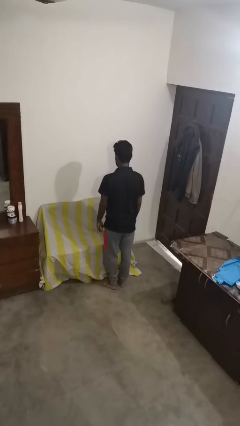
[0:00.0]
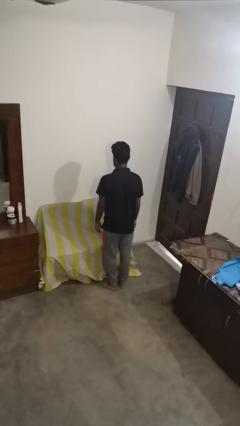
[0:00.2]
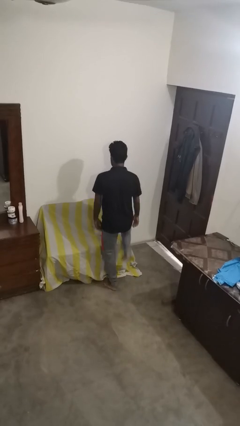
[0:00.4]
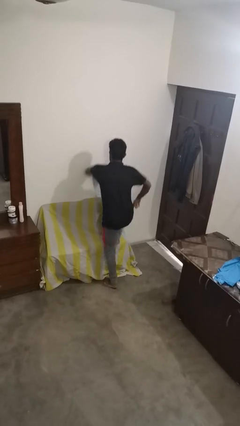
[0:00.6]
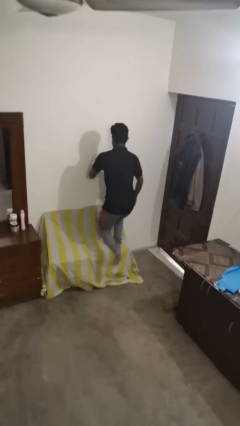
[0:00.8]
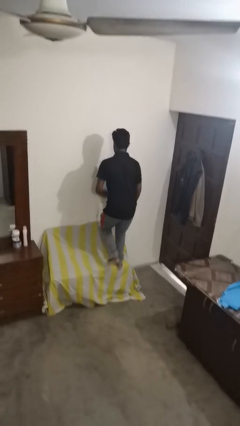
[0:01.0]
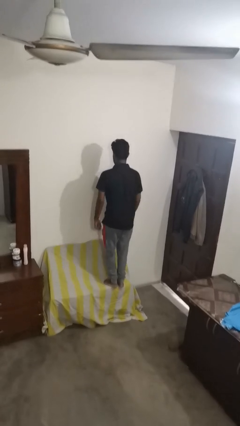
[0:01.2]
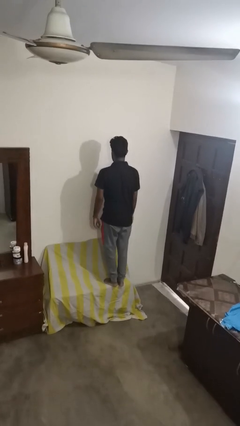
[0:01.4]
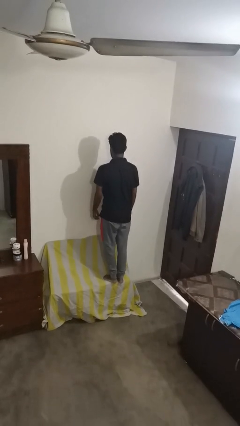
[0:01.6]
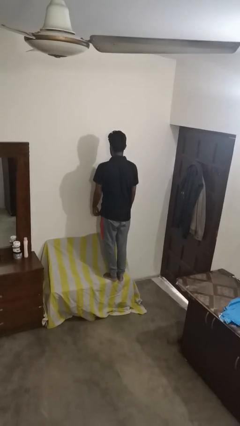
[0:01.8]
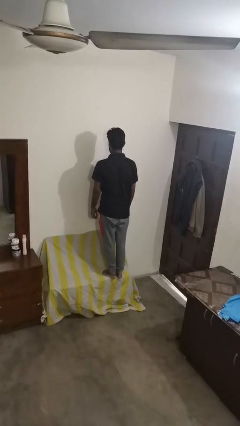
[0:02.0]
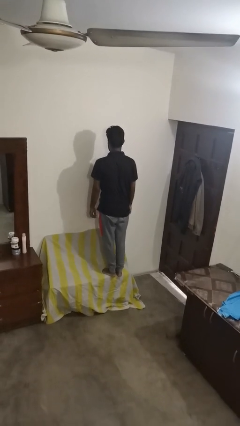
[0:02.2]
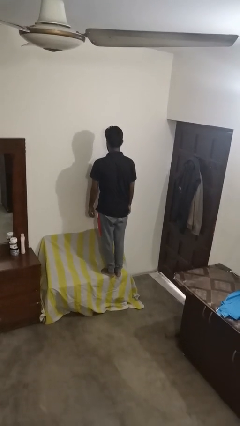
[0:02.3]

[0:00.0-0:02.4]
person jumps on couch

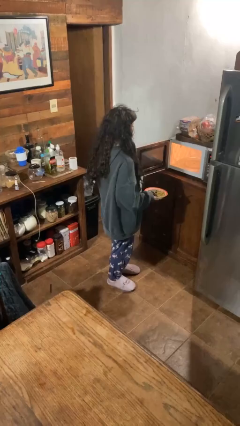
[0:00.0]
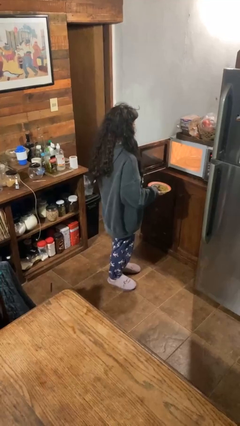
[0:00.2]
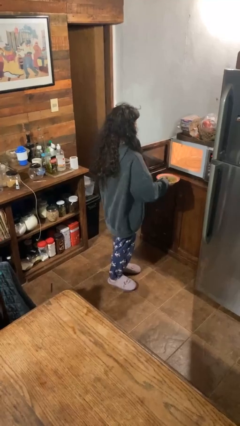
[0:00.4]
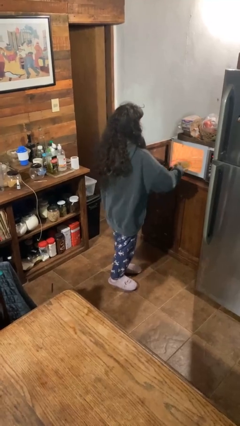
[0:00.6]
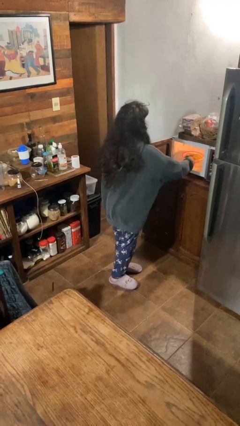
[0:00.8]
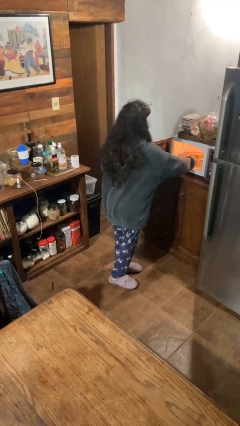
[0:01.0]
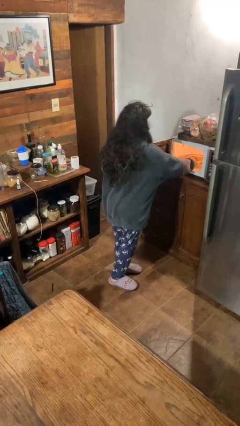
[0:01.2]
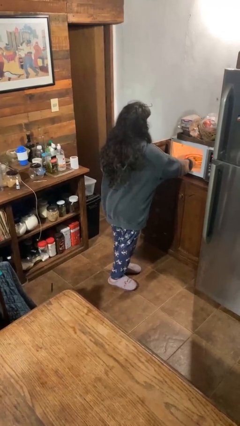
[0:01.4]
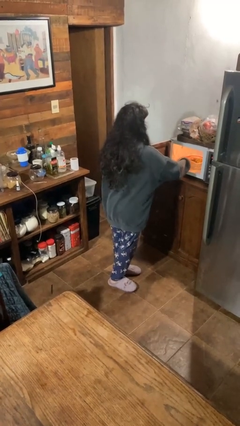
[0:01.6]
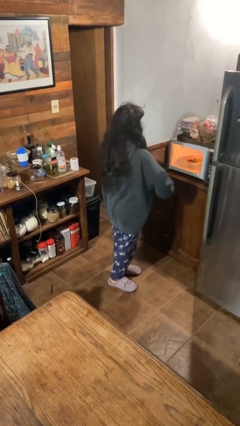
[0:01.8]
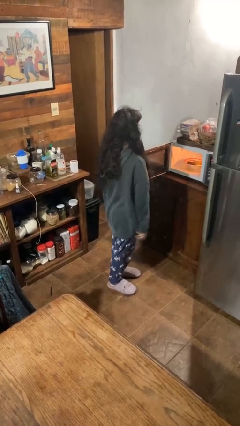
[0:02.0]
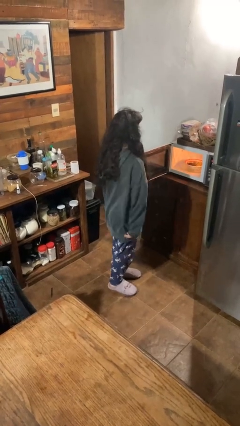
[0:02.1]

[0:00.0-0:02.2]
person puts object into microwave

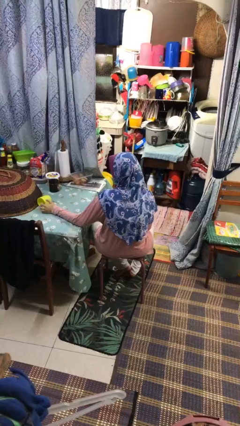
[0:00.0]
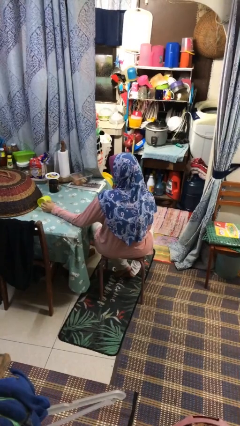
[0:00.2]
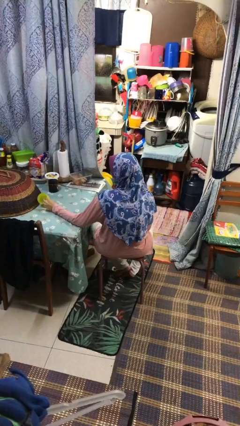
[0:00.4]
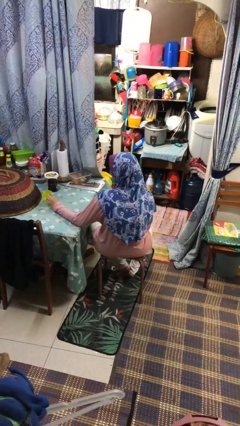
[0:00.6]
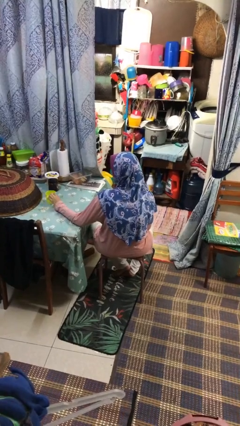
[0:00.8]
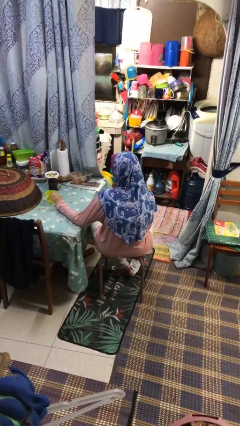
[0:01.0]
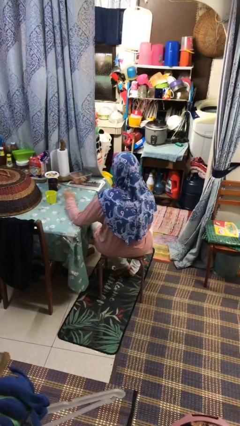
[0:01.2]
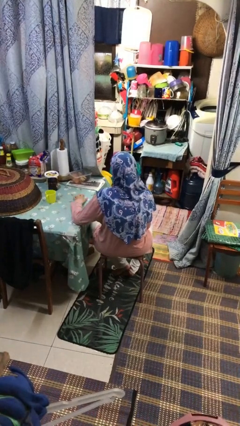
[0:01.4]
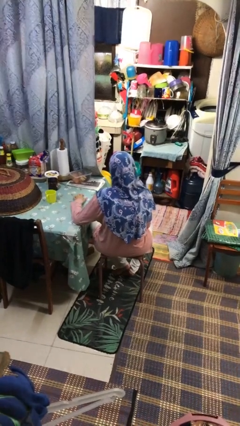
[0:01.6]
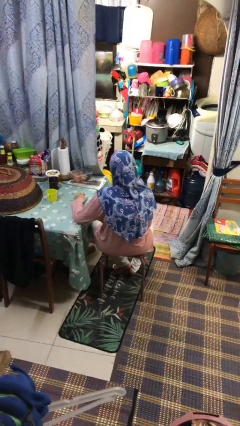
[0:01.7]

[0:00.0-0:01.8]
person sets upright glass

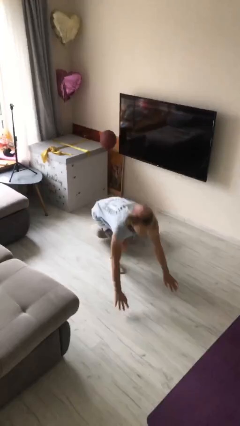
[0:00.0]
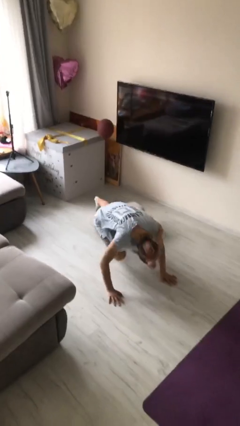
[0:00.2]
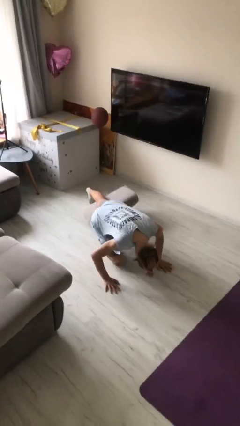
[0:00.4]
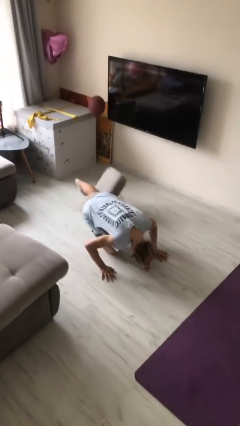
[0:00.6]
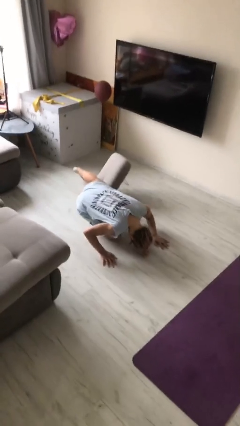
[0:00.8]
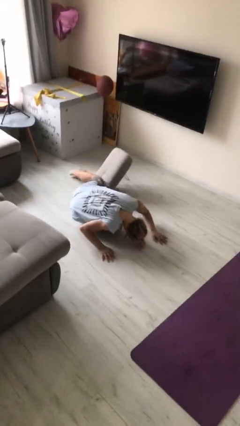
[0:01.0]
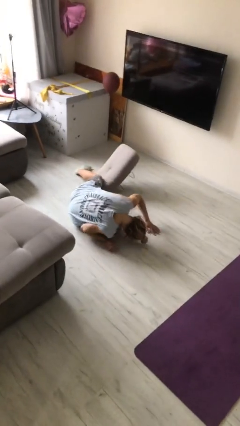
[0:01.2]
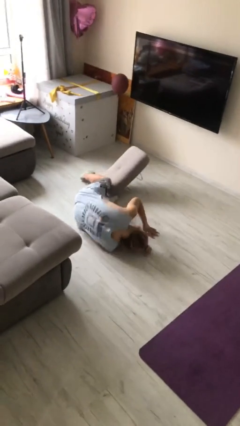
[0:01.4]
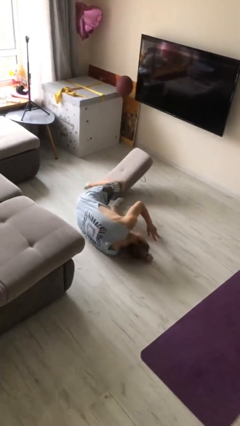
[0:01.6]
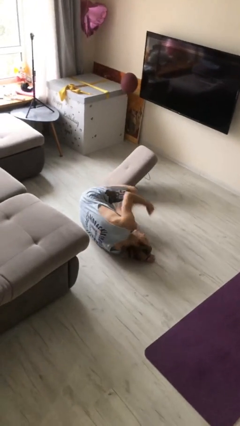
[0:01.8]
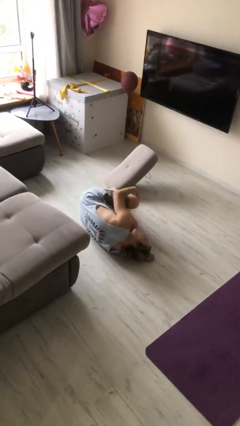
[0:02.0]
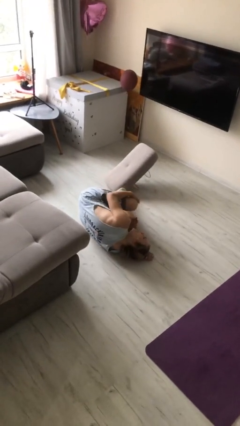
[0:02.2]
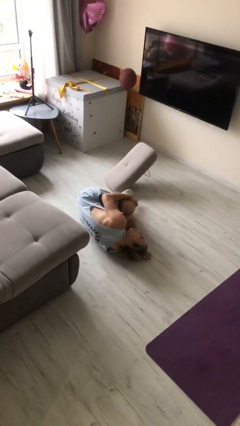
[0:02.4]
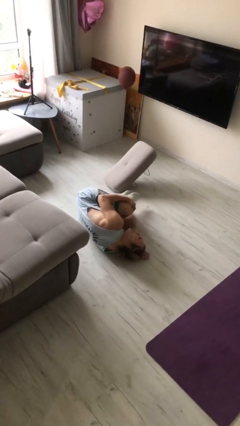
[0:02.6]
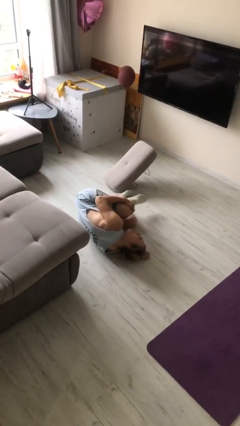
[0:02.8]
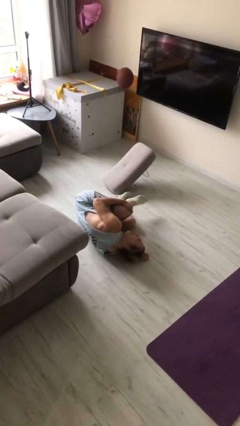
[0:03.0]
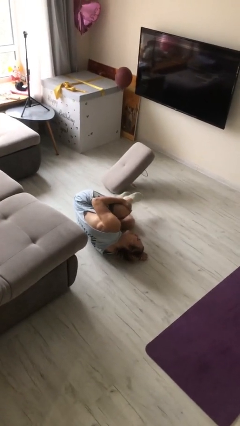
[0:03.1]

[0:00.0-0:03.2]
person lies down on floor

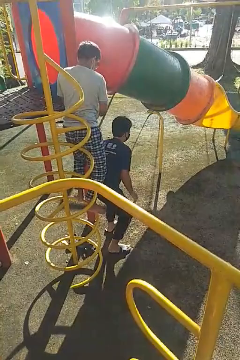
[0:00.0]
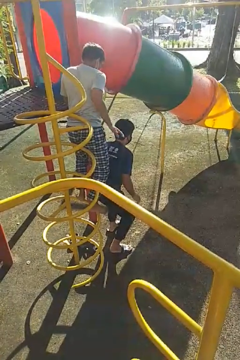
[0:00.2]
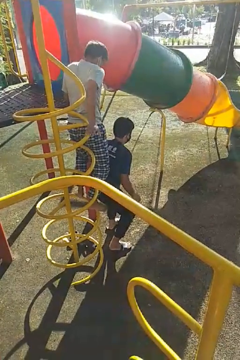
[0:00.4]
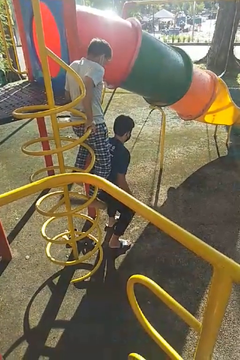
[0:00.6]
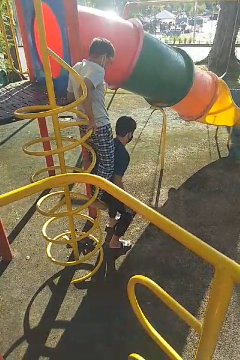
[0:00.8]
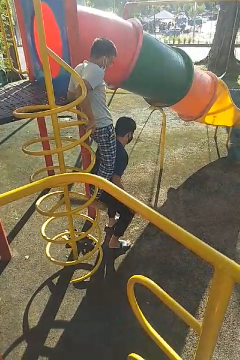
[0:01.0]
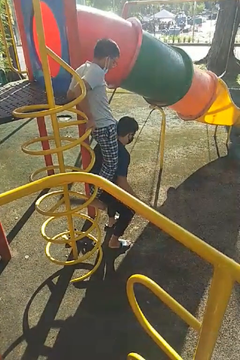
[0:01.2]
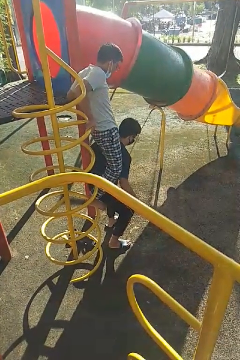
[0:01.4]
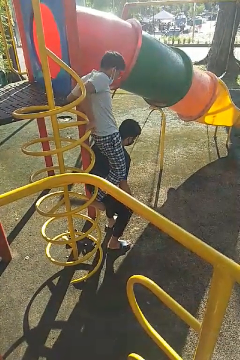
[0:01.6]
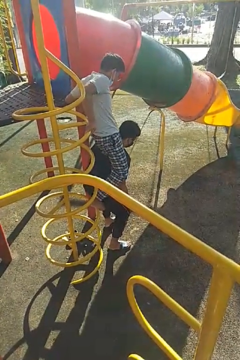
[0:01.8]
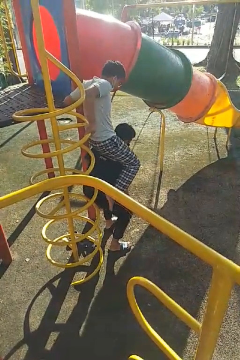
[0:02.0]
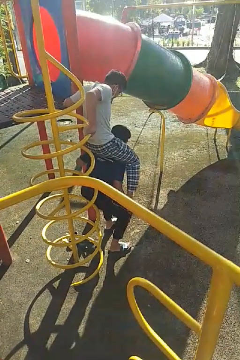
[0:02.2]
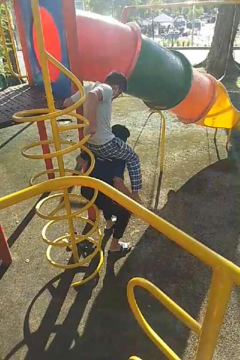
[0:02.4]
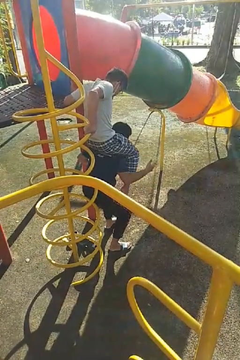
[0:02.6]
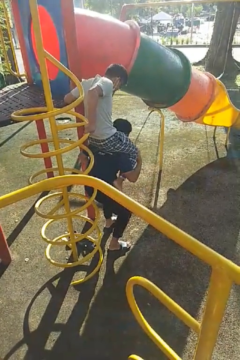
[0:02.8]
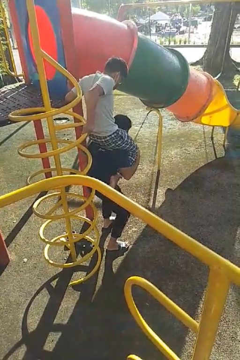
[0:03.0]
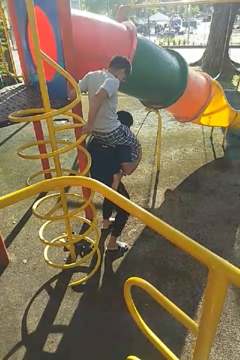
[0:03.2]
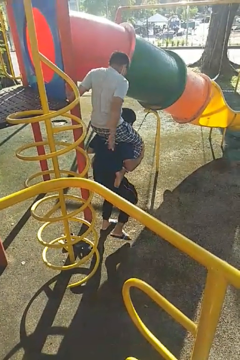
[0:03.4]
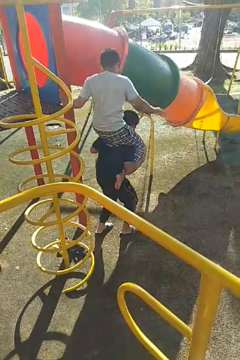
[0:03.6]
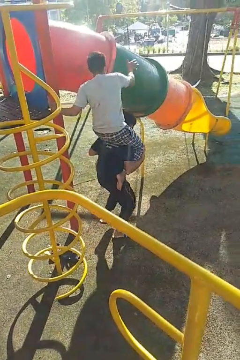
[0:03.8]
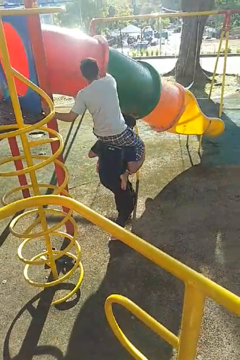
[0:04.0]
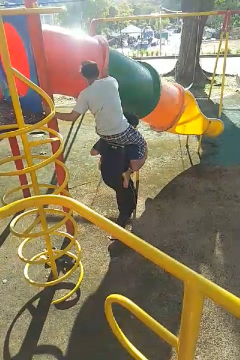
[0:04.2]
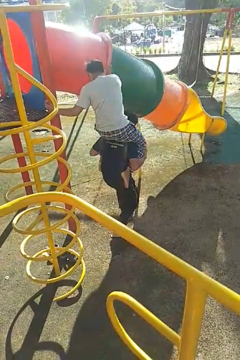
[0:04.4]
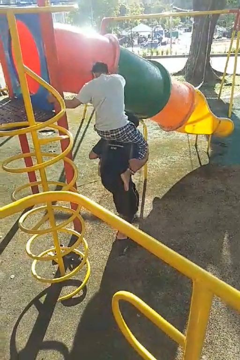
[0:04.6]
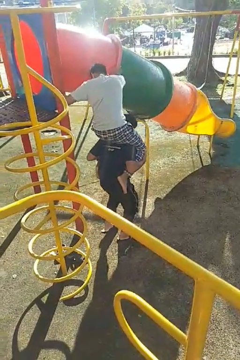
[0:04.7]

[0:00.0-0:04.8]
person carries person on shoulders

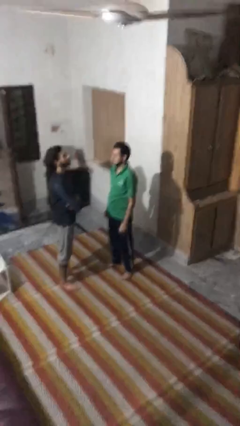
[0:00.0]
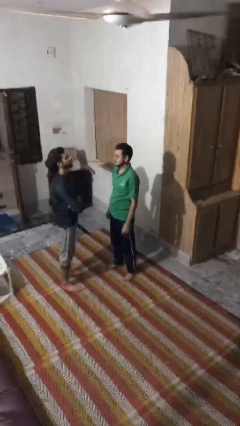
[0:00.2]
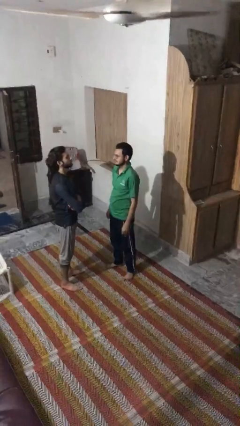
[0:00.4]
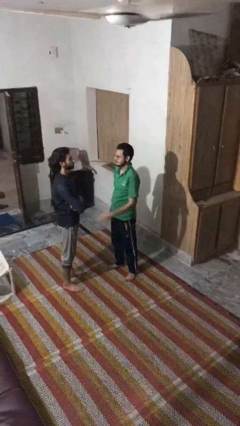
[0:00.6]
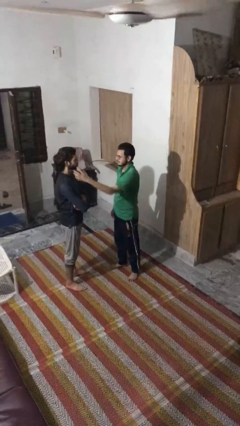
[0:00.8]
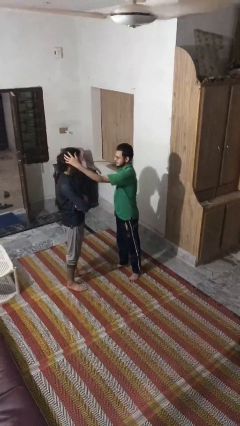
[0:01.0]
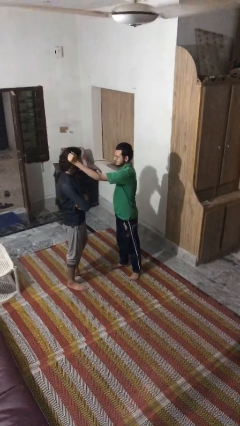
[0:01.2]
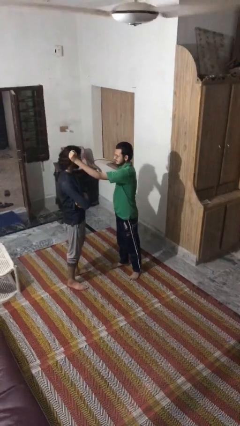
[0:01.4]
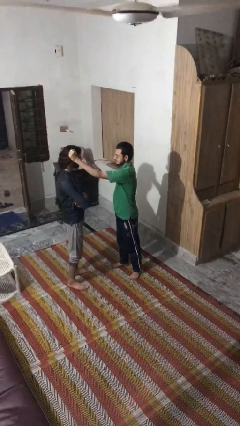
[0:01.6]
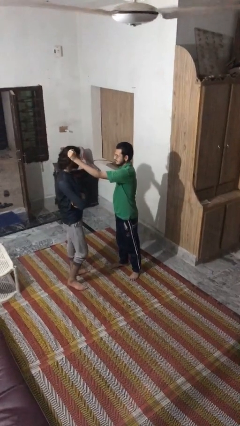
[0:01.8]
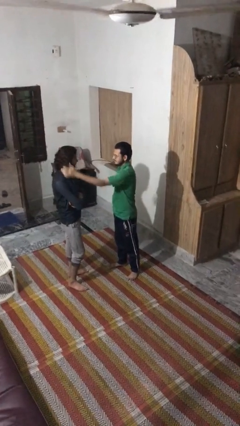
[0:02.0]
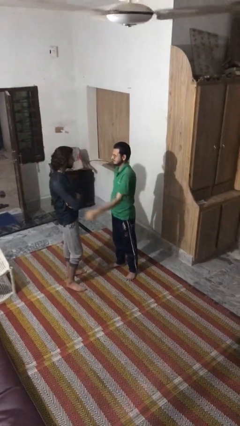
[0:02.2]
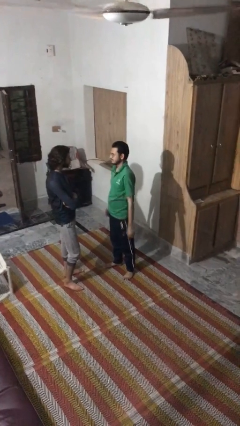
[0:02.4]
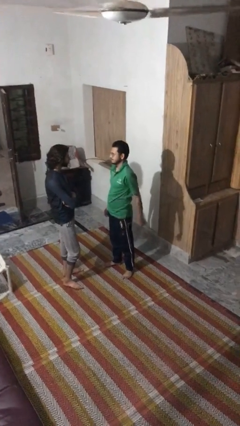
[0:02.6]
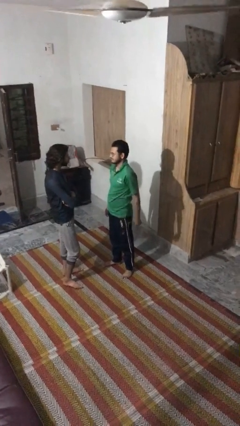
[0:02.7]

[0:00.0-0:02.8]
person grabs person by hair

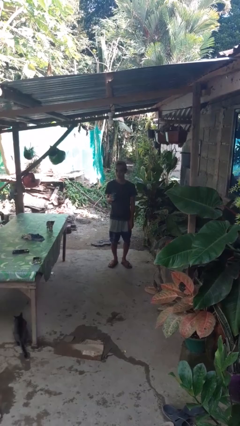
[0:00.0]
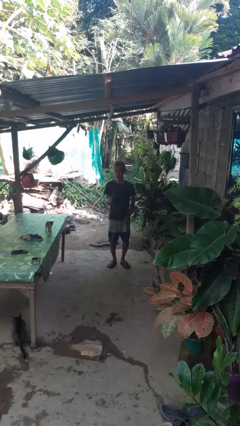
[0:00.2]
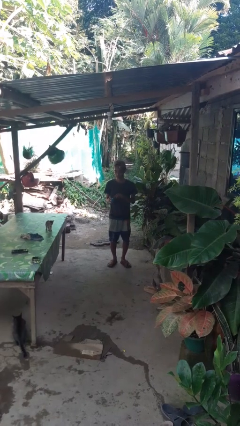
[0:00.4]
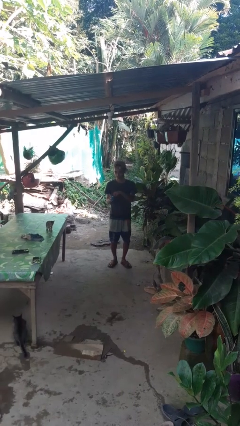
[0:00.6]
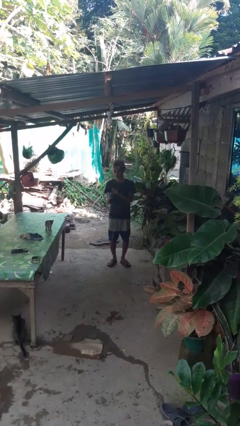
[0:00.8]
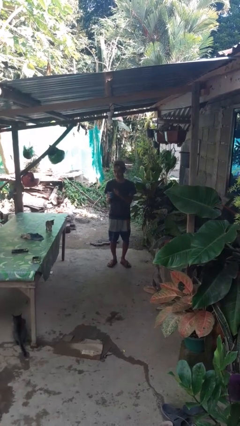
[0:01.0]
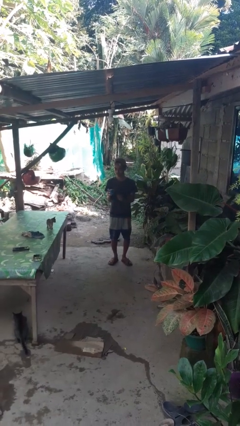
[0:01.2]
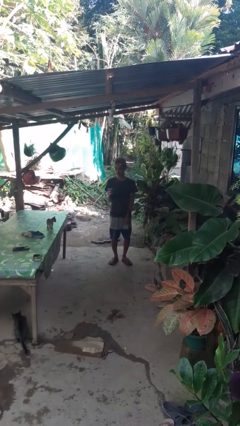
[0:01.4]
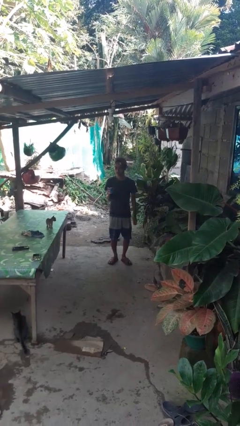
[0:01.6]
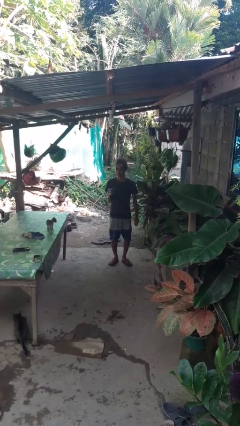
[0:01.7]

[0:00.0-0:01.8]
person opens beverage can
